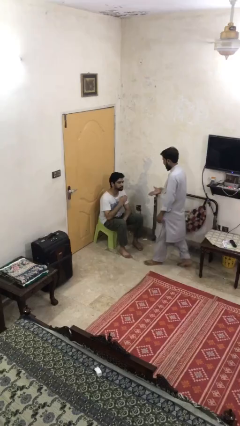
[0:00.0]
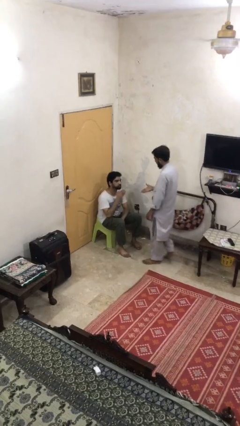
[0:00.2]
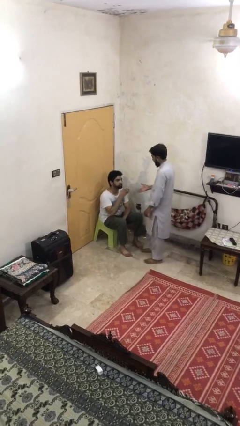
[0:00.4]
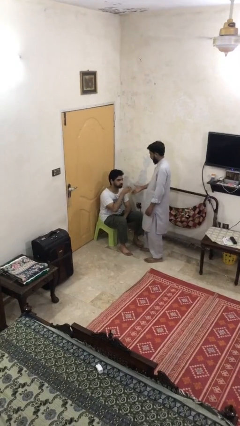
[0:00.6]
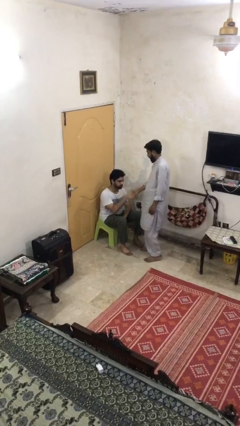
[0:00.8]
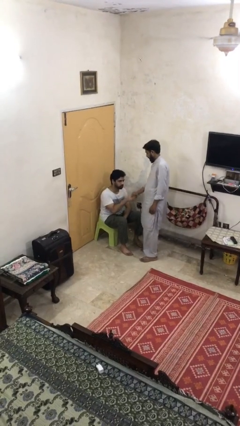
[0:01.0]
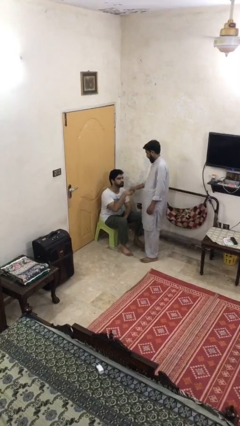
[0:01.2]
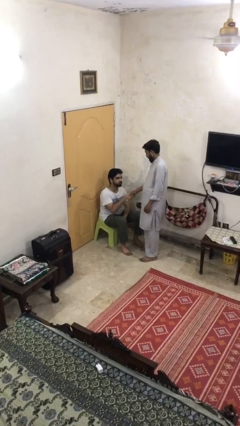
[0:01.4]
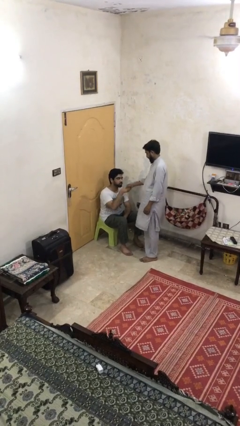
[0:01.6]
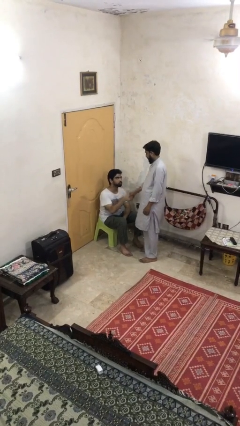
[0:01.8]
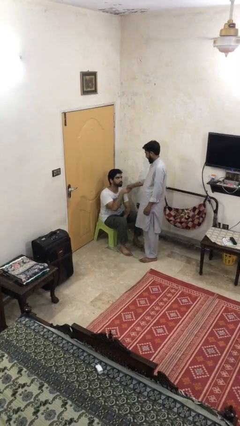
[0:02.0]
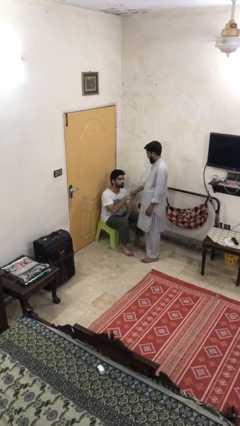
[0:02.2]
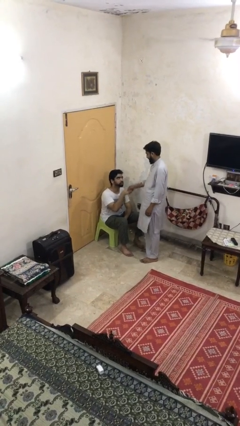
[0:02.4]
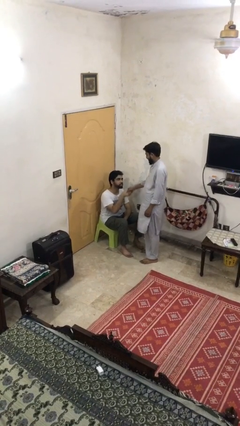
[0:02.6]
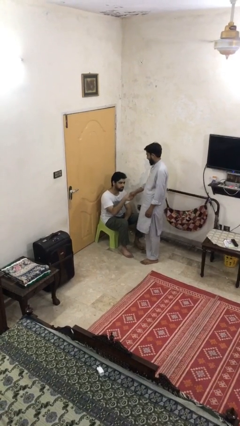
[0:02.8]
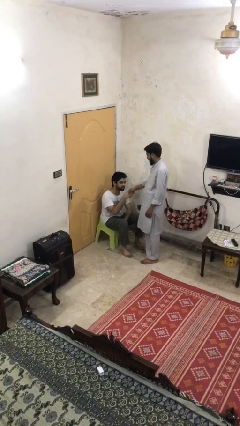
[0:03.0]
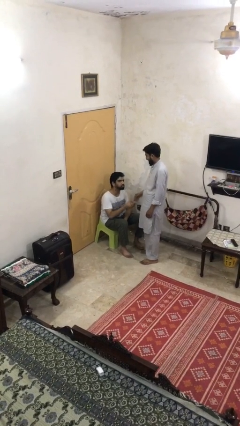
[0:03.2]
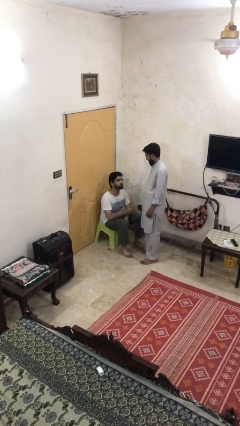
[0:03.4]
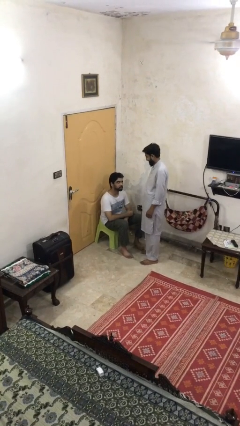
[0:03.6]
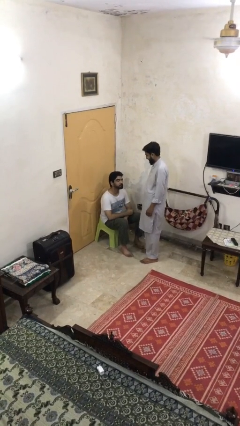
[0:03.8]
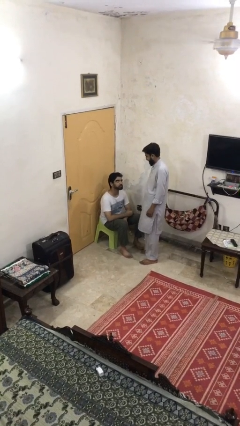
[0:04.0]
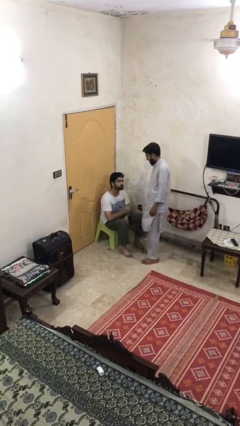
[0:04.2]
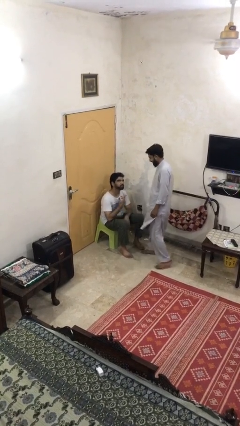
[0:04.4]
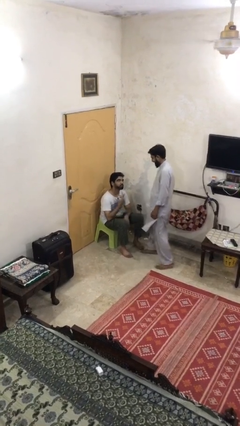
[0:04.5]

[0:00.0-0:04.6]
person shakes hand

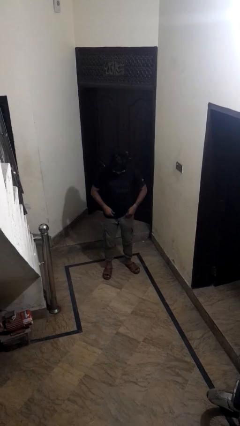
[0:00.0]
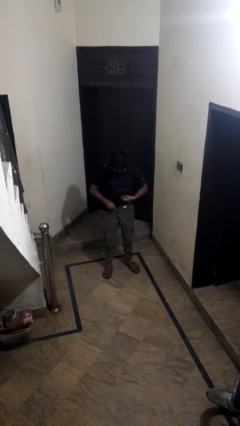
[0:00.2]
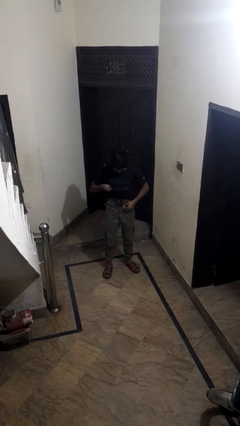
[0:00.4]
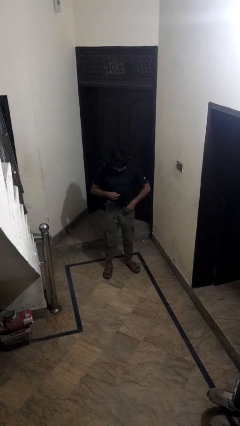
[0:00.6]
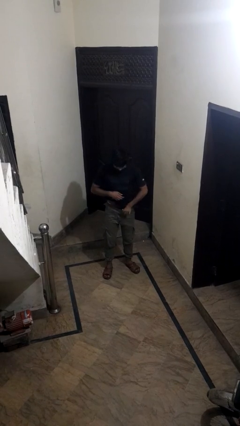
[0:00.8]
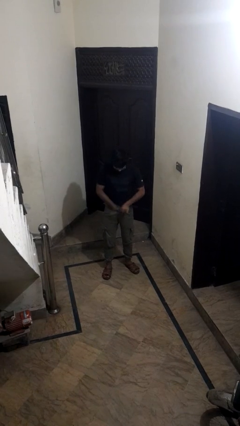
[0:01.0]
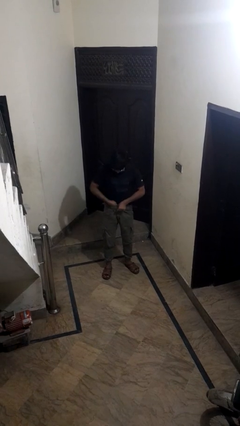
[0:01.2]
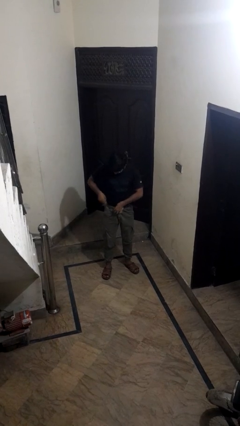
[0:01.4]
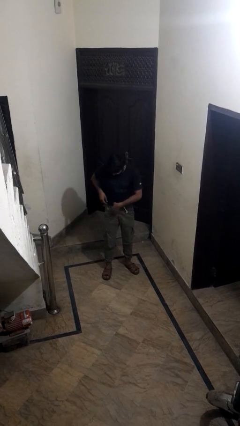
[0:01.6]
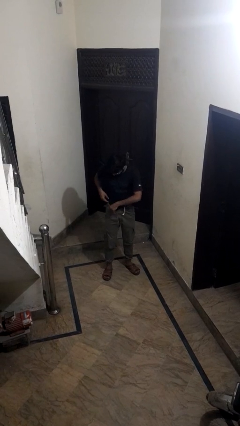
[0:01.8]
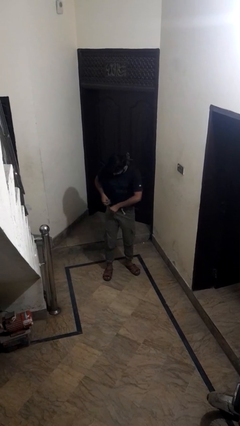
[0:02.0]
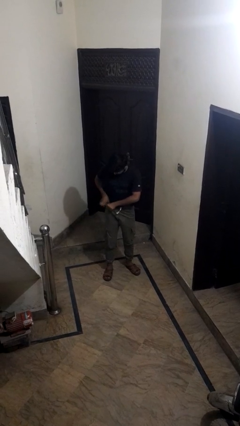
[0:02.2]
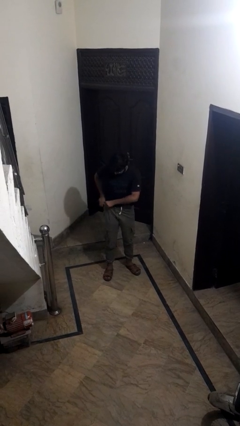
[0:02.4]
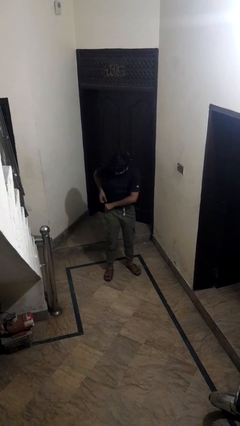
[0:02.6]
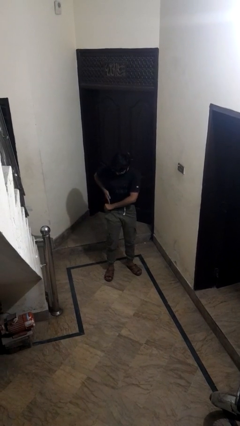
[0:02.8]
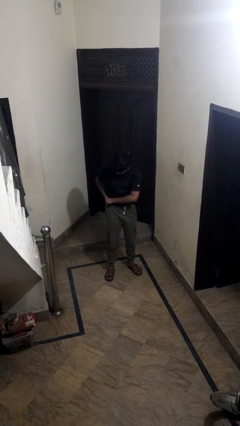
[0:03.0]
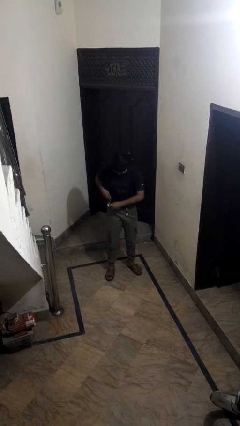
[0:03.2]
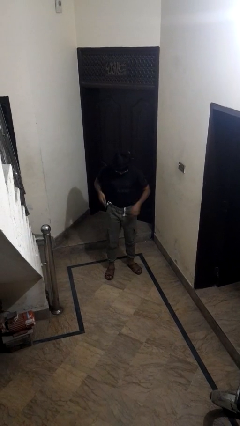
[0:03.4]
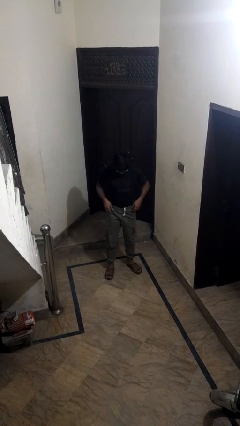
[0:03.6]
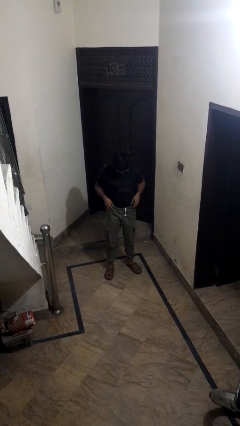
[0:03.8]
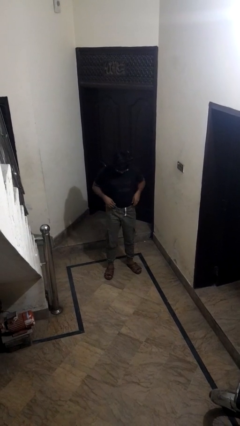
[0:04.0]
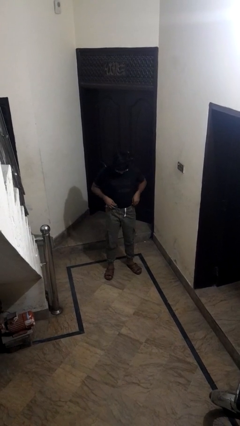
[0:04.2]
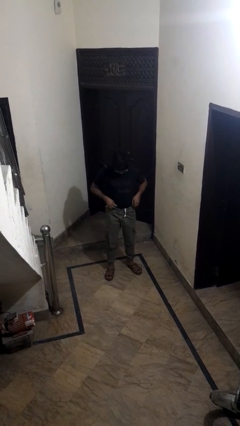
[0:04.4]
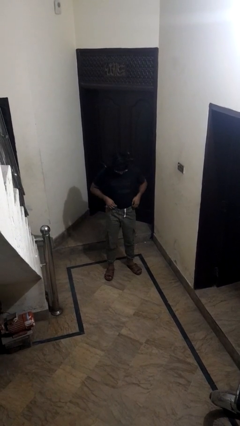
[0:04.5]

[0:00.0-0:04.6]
person tucks in shirt

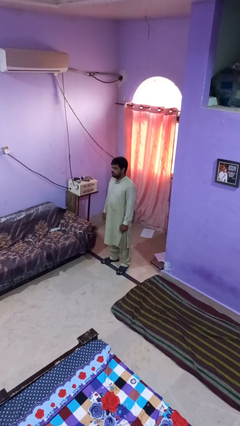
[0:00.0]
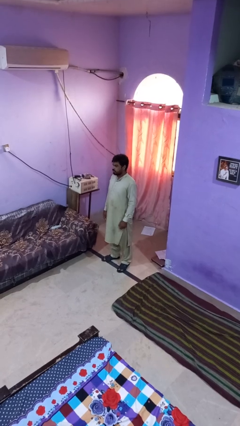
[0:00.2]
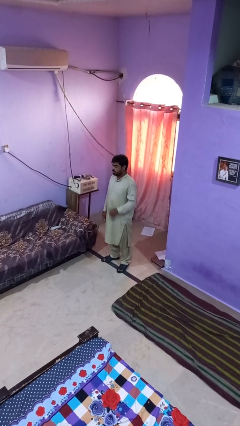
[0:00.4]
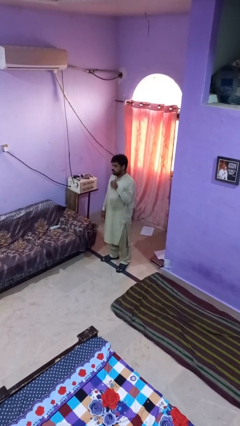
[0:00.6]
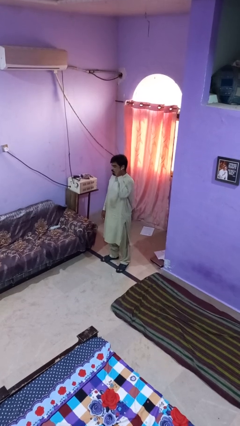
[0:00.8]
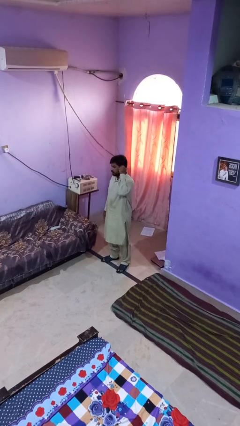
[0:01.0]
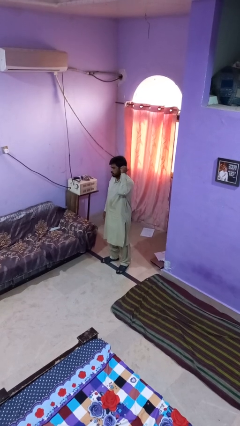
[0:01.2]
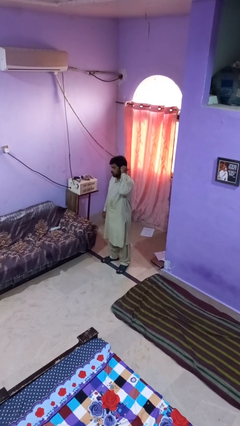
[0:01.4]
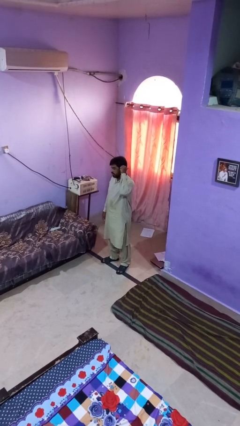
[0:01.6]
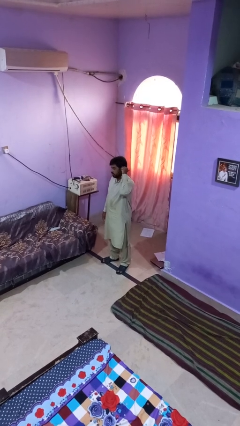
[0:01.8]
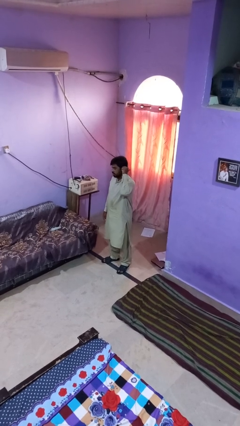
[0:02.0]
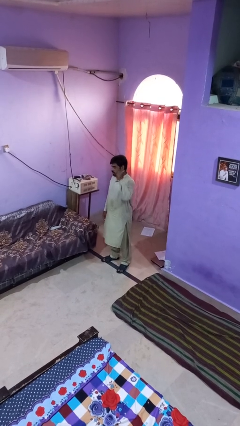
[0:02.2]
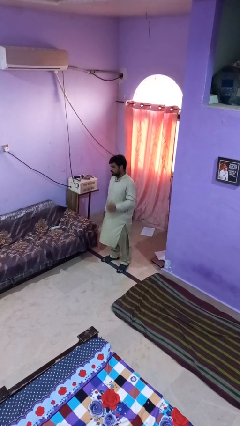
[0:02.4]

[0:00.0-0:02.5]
person gestures behind me

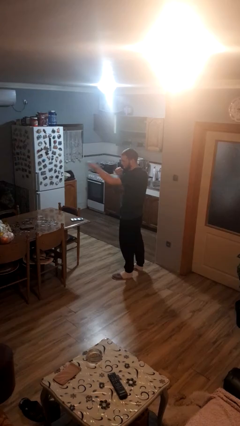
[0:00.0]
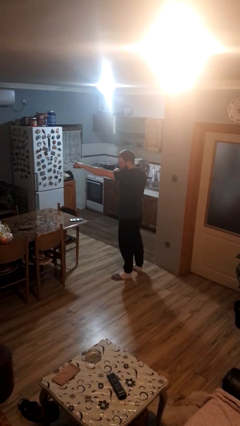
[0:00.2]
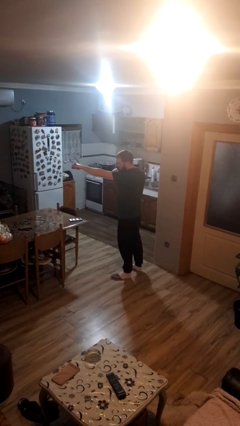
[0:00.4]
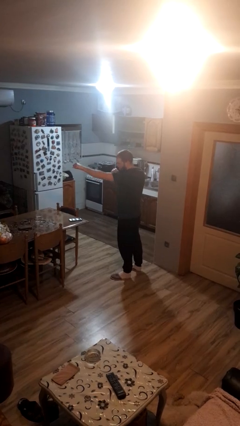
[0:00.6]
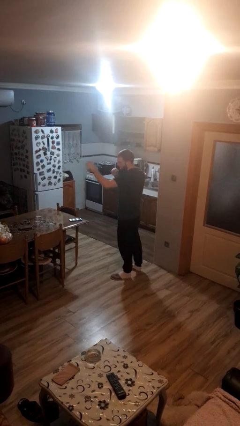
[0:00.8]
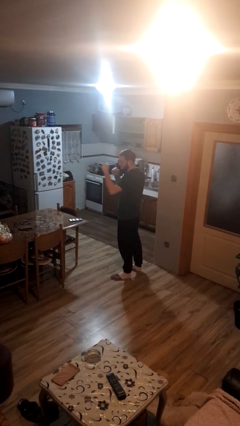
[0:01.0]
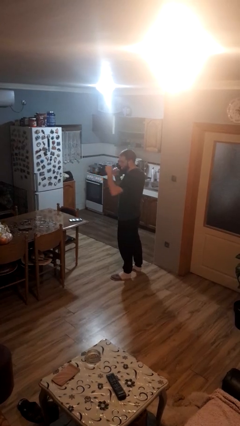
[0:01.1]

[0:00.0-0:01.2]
person punches

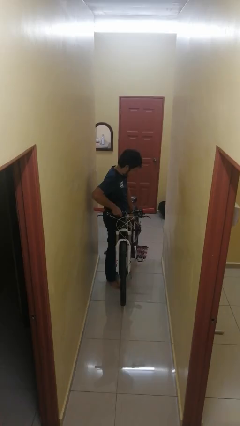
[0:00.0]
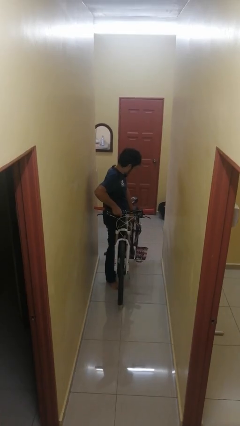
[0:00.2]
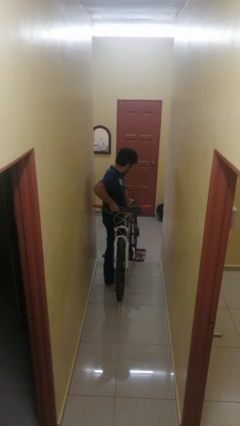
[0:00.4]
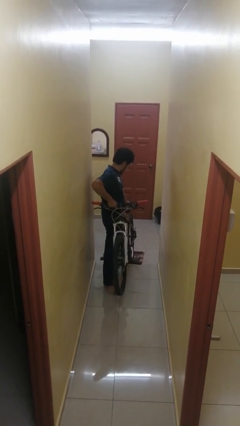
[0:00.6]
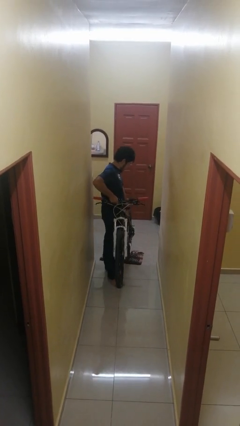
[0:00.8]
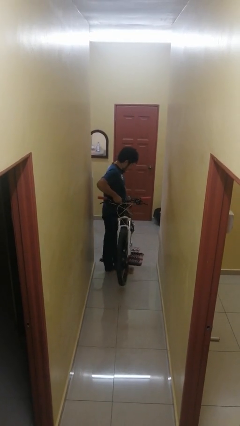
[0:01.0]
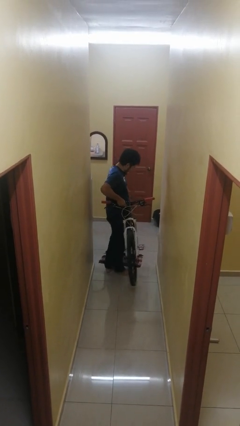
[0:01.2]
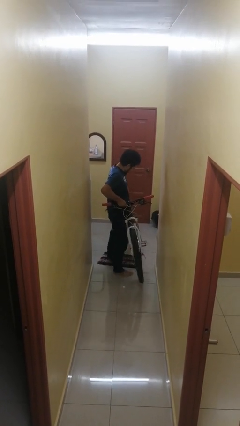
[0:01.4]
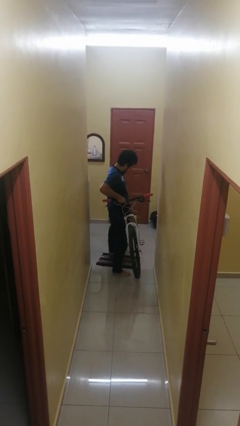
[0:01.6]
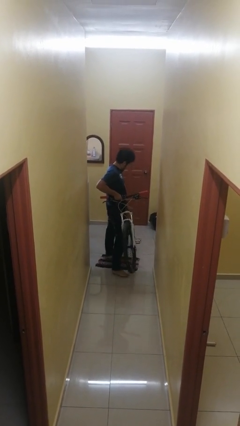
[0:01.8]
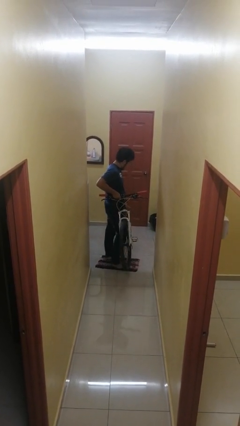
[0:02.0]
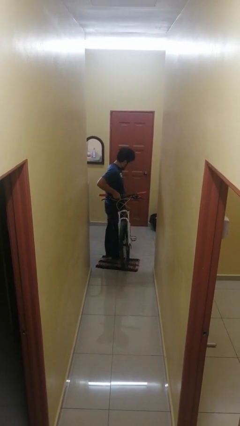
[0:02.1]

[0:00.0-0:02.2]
person carries bicycle

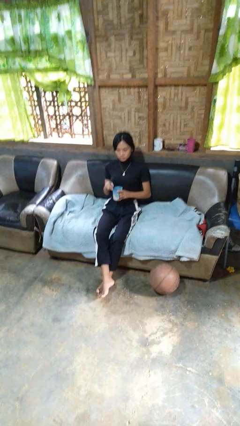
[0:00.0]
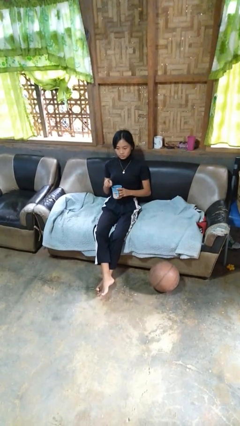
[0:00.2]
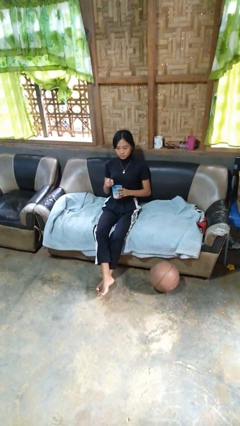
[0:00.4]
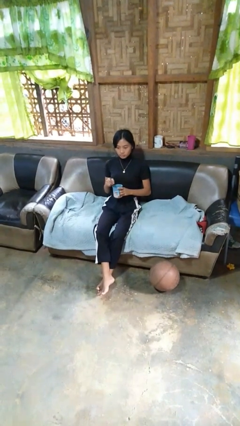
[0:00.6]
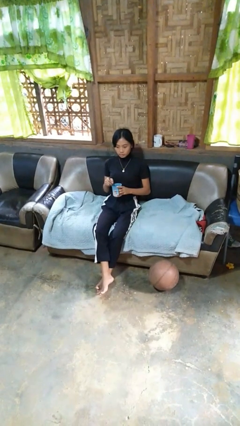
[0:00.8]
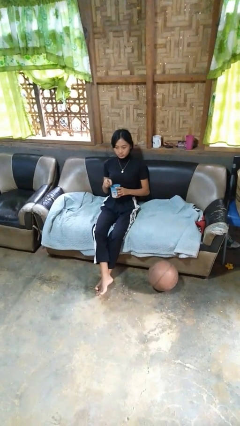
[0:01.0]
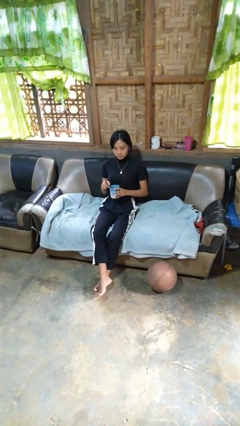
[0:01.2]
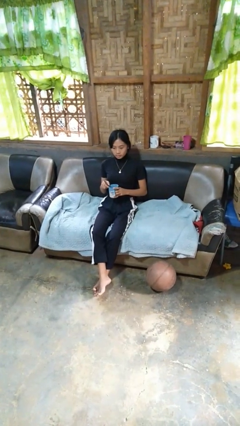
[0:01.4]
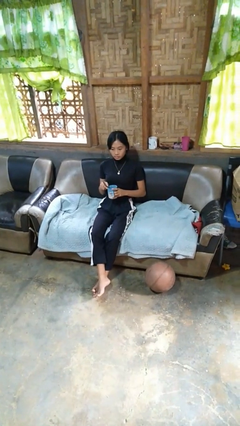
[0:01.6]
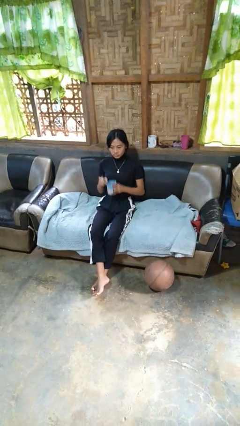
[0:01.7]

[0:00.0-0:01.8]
person stirs mug

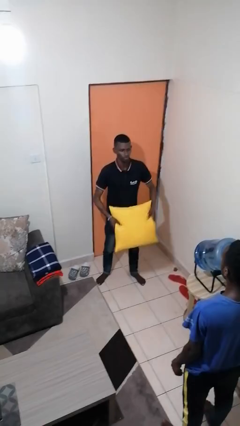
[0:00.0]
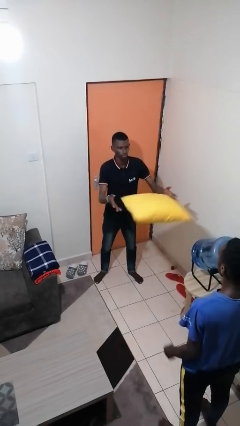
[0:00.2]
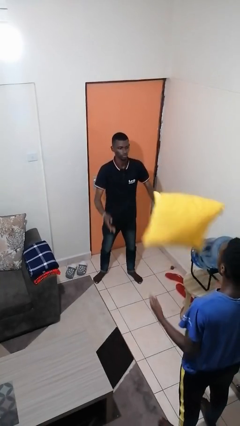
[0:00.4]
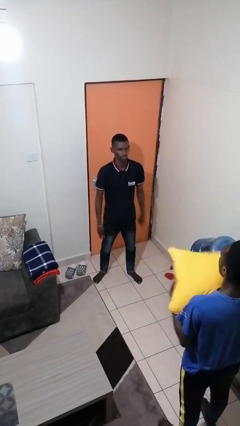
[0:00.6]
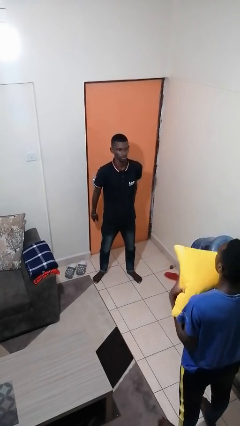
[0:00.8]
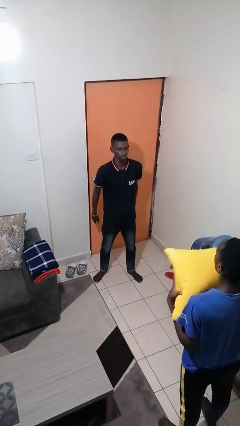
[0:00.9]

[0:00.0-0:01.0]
person throws object to person
